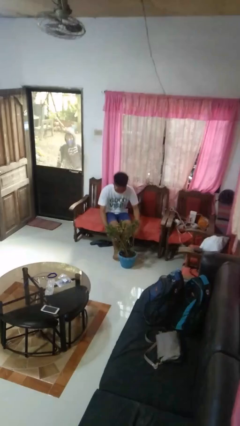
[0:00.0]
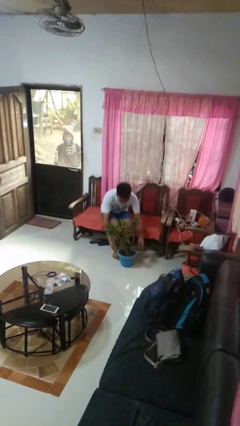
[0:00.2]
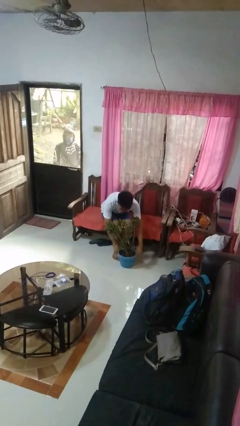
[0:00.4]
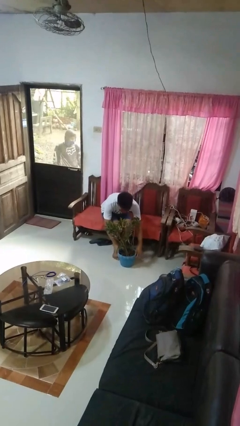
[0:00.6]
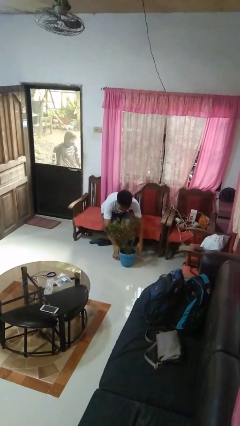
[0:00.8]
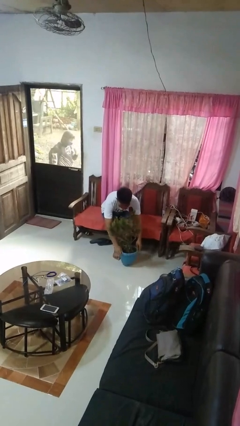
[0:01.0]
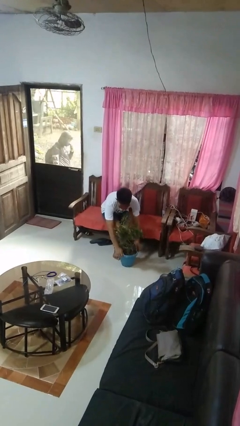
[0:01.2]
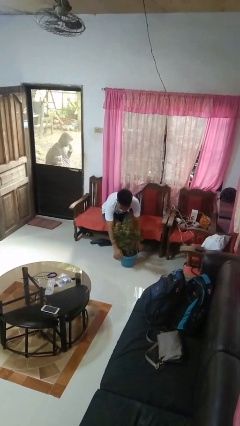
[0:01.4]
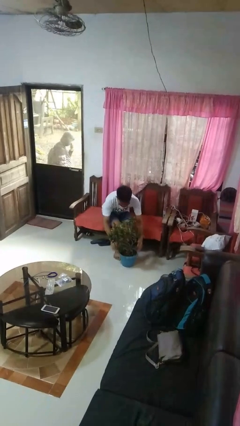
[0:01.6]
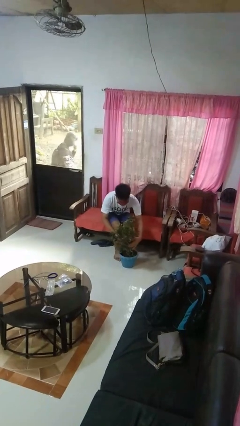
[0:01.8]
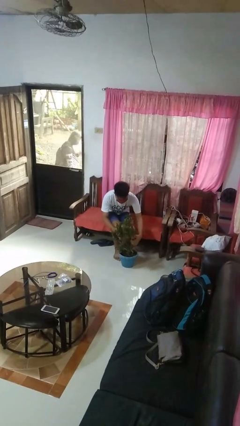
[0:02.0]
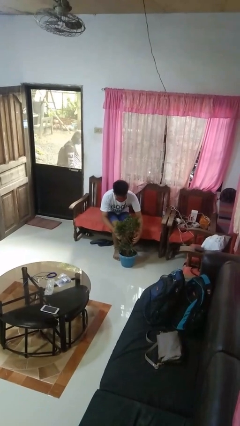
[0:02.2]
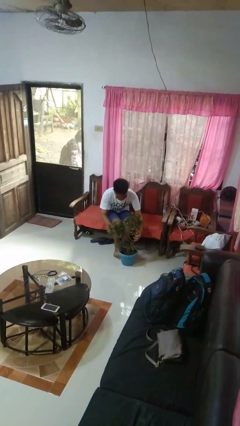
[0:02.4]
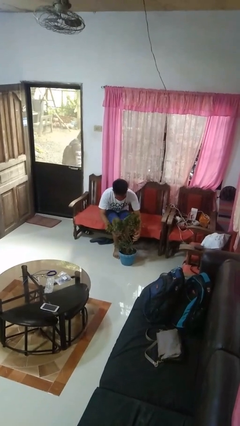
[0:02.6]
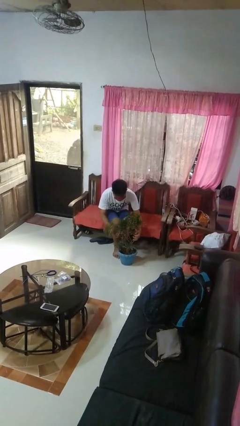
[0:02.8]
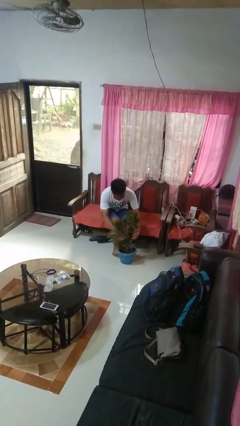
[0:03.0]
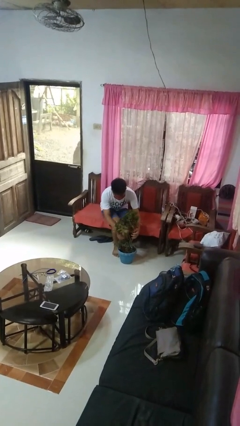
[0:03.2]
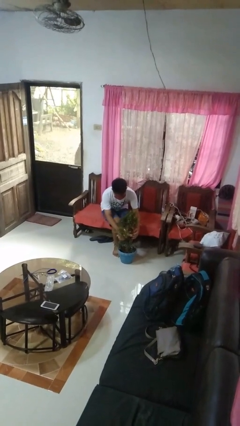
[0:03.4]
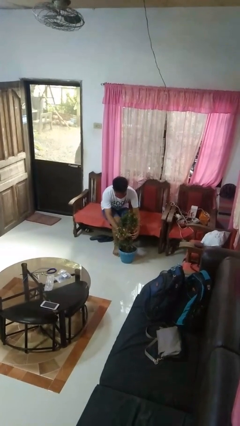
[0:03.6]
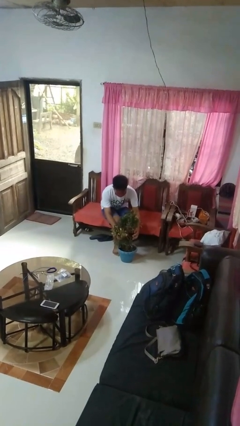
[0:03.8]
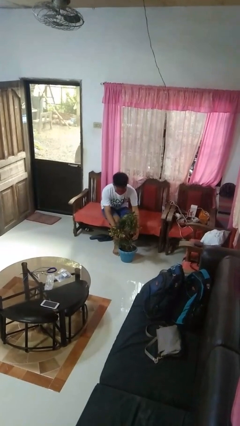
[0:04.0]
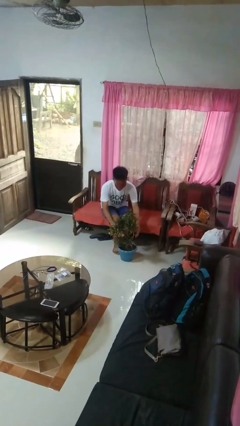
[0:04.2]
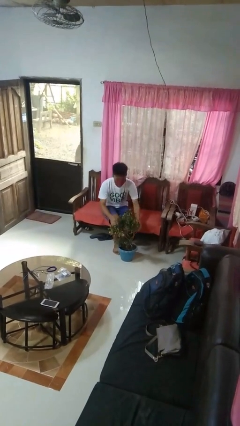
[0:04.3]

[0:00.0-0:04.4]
person arranges flowers in vase

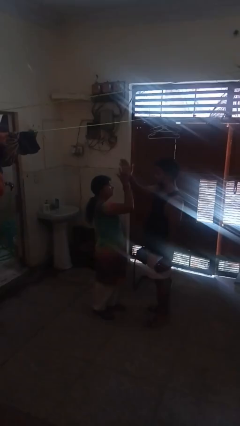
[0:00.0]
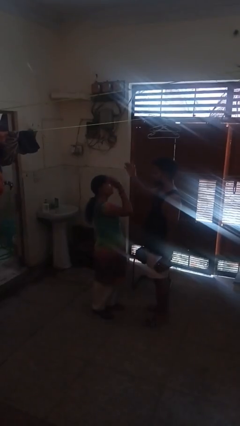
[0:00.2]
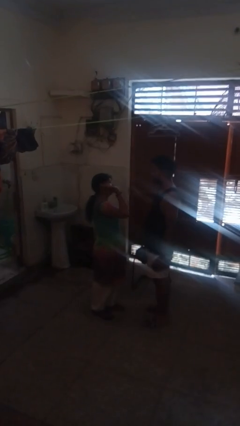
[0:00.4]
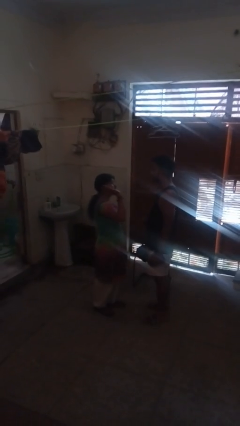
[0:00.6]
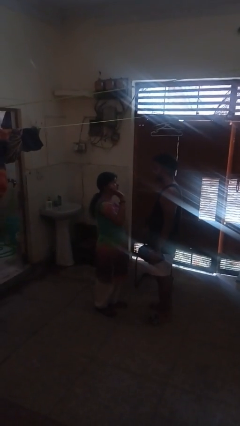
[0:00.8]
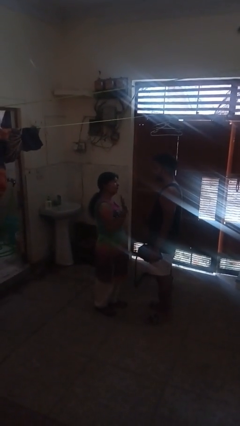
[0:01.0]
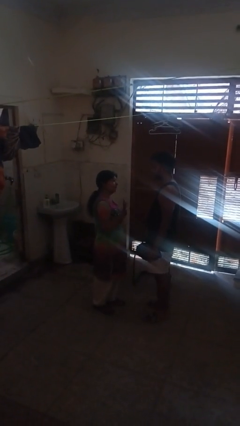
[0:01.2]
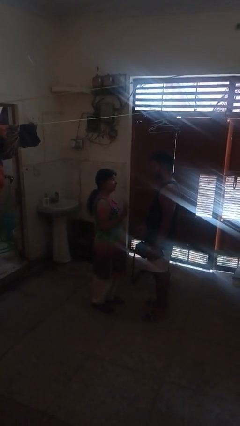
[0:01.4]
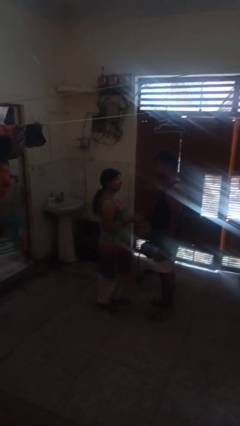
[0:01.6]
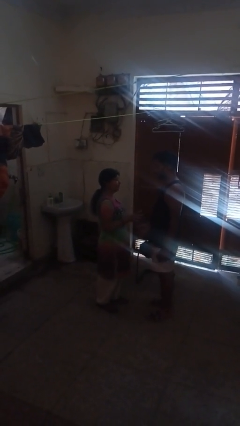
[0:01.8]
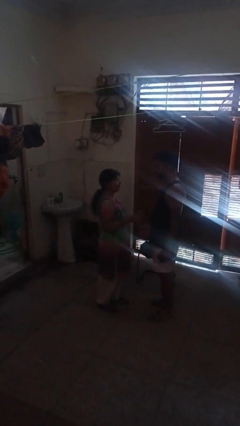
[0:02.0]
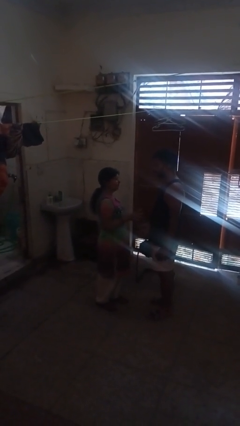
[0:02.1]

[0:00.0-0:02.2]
person highfives hand

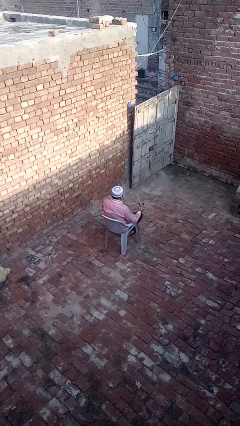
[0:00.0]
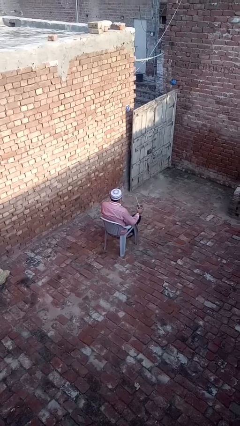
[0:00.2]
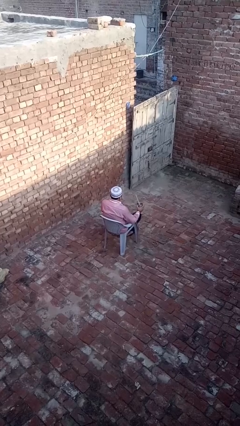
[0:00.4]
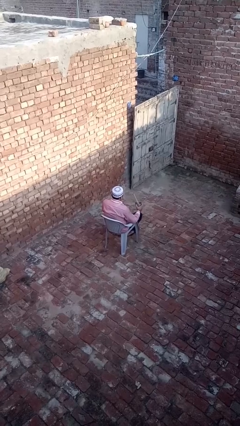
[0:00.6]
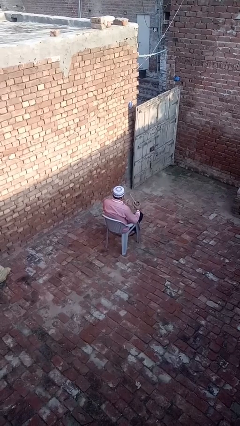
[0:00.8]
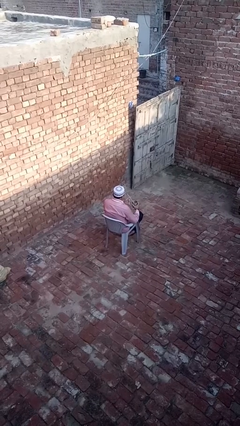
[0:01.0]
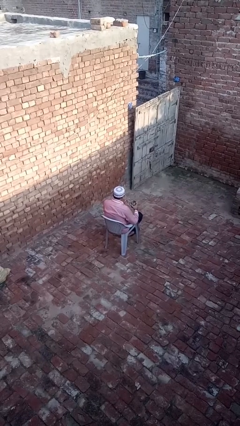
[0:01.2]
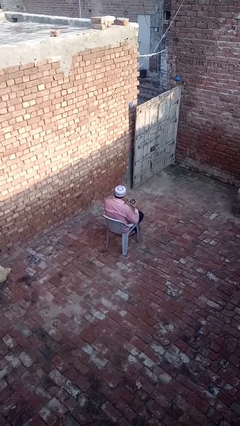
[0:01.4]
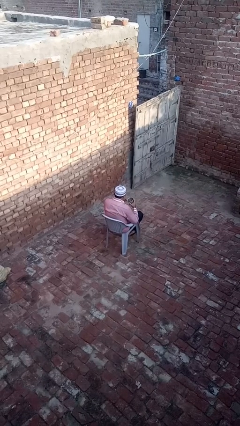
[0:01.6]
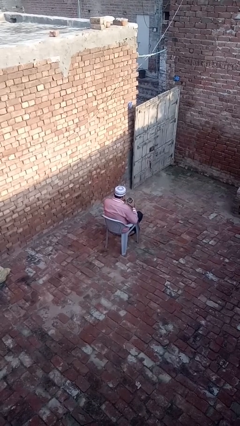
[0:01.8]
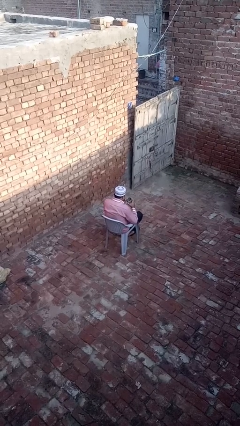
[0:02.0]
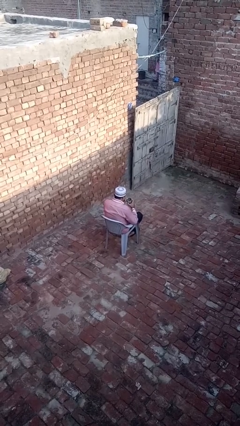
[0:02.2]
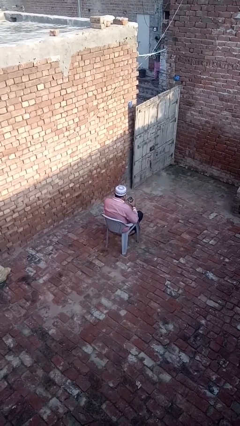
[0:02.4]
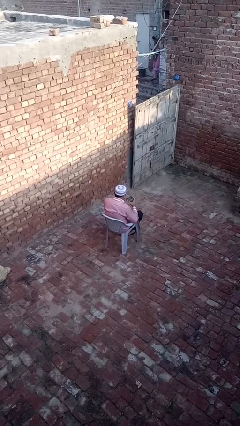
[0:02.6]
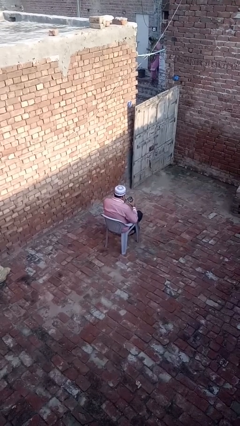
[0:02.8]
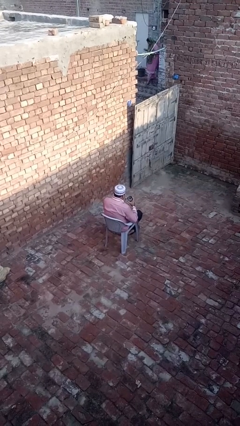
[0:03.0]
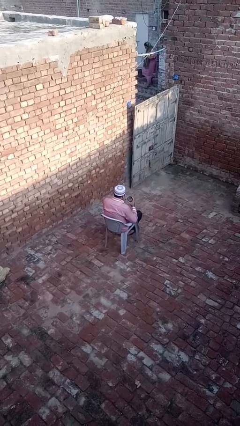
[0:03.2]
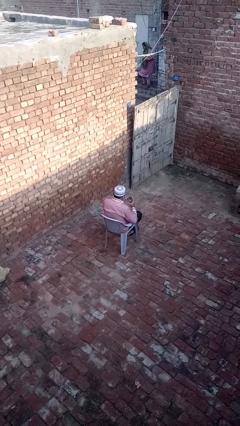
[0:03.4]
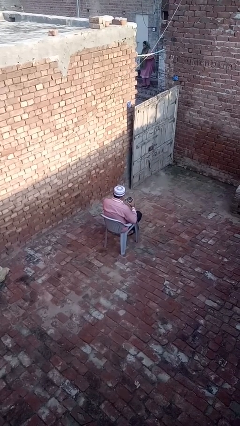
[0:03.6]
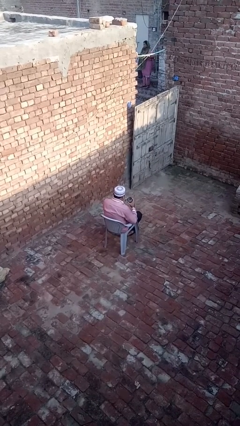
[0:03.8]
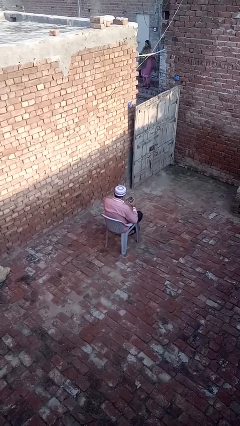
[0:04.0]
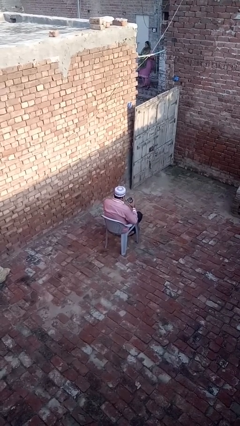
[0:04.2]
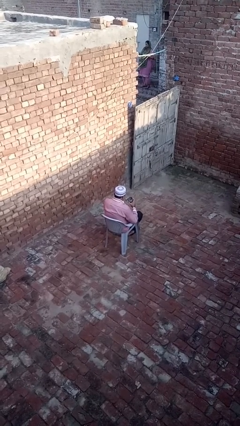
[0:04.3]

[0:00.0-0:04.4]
person drinks from straw

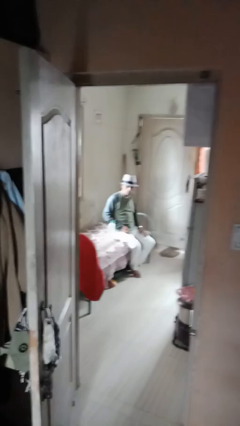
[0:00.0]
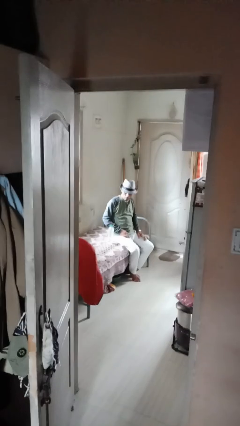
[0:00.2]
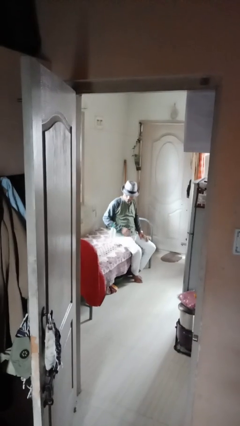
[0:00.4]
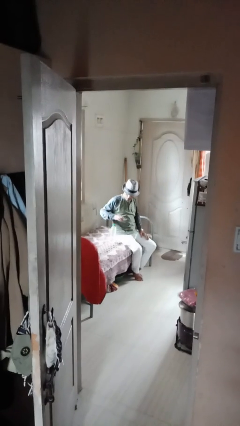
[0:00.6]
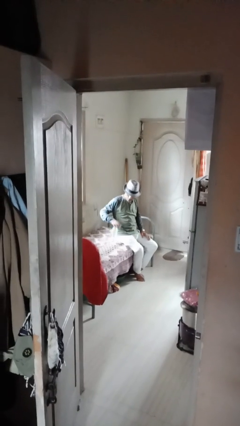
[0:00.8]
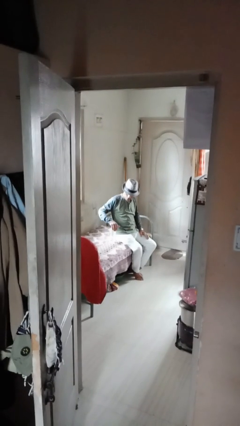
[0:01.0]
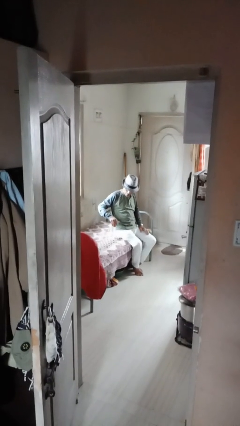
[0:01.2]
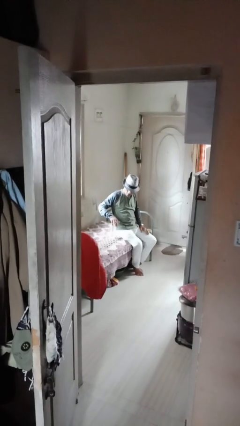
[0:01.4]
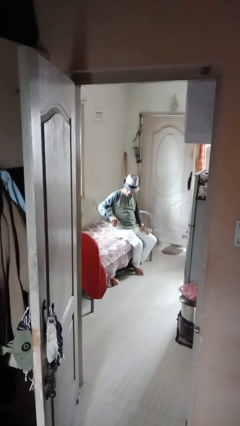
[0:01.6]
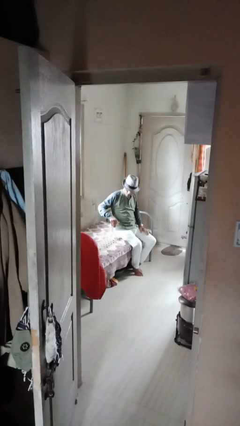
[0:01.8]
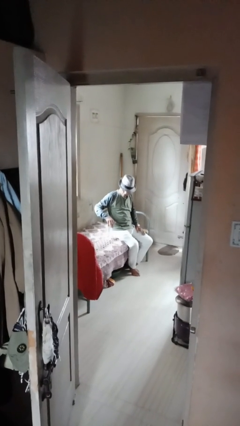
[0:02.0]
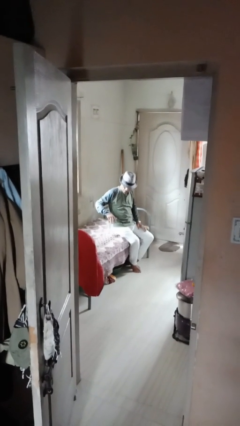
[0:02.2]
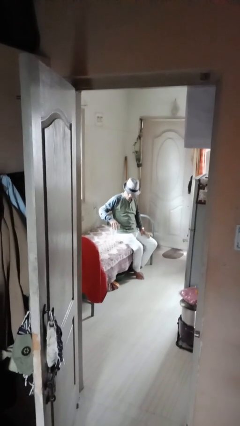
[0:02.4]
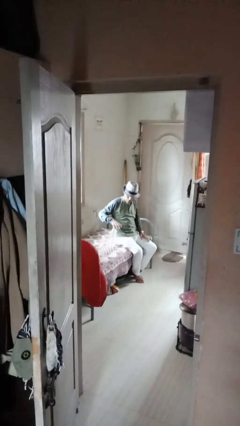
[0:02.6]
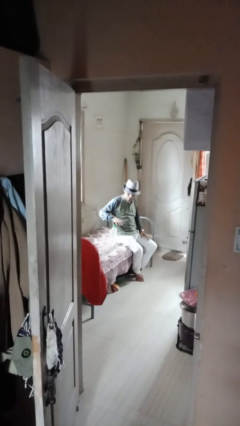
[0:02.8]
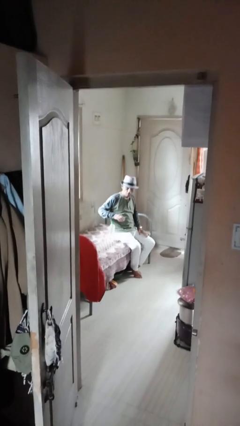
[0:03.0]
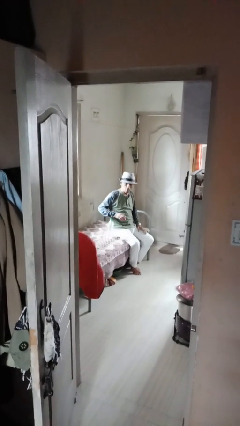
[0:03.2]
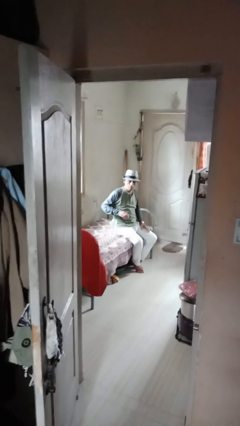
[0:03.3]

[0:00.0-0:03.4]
person taps object with finger

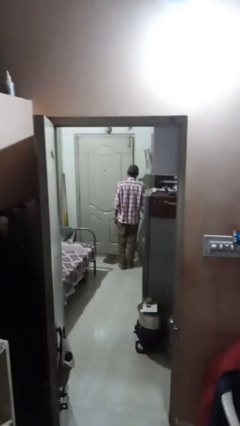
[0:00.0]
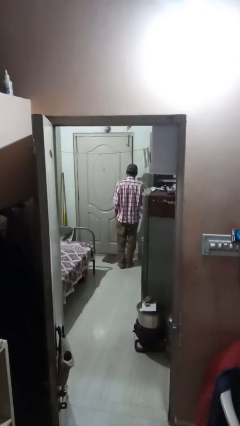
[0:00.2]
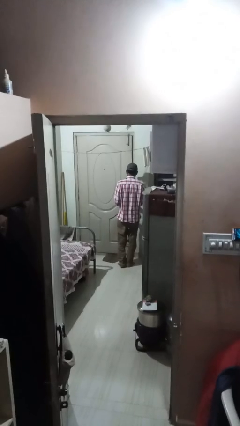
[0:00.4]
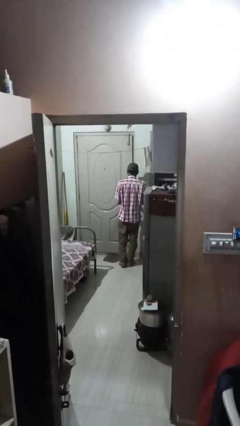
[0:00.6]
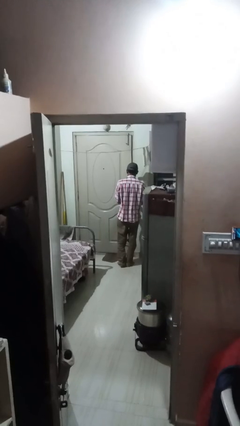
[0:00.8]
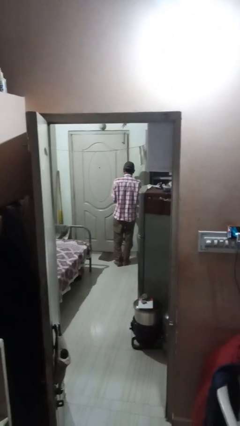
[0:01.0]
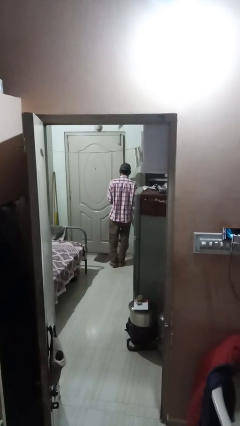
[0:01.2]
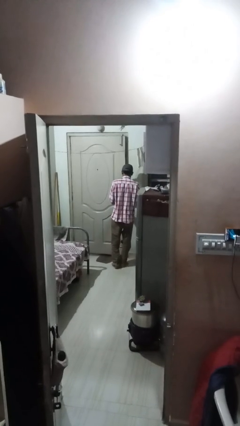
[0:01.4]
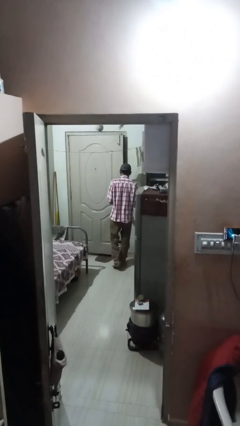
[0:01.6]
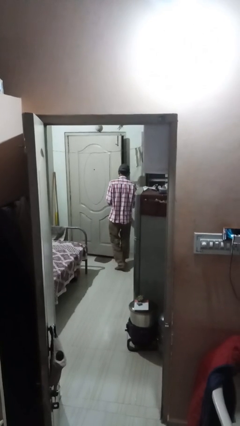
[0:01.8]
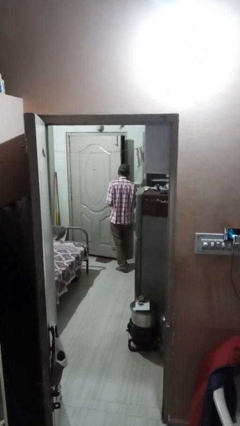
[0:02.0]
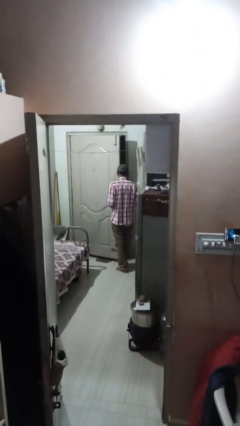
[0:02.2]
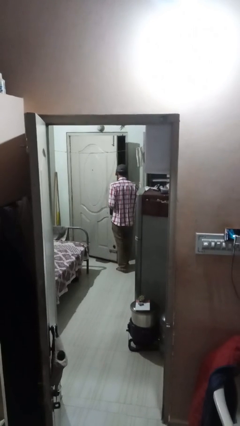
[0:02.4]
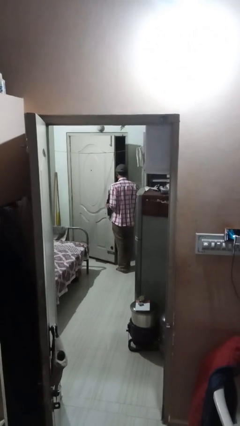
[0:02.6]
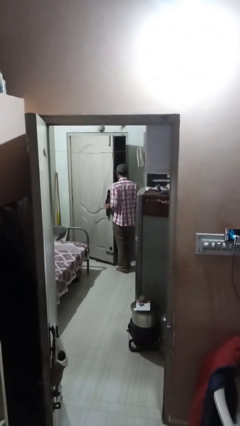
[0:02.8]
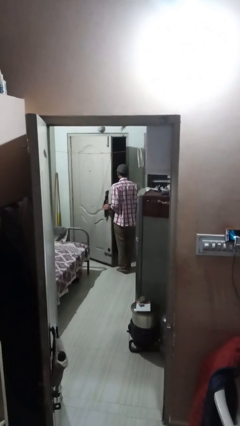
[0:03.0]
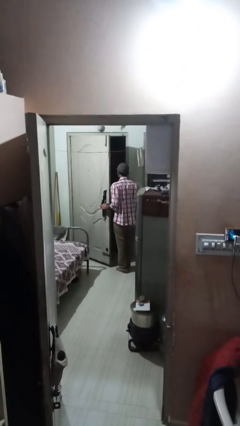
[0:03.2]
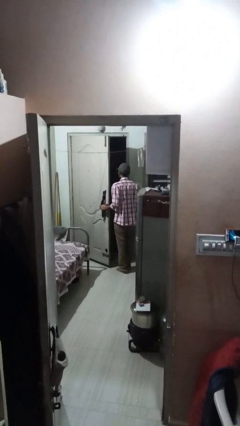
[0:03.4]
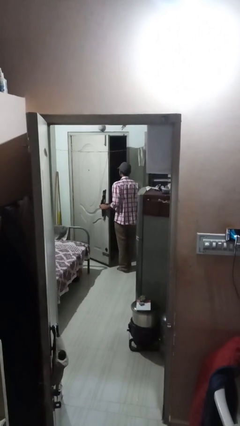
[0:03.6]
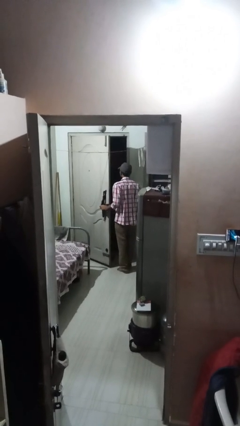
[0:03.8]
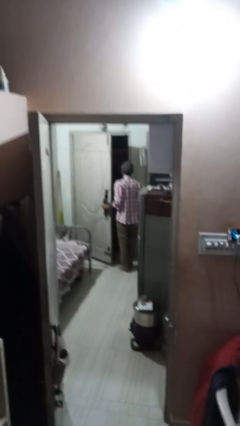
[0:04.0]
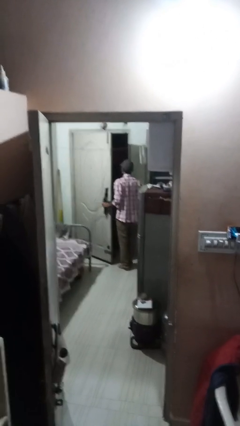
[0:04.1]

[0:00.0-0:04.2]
person opens facility door
